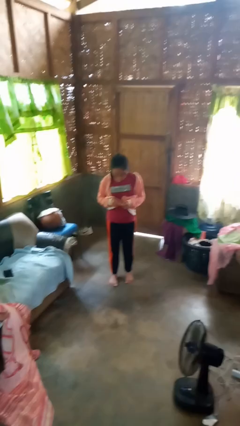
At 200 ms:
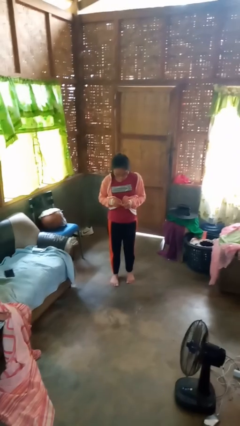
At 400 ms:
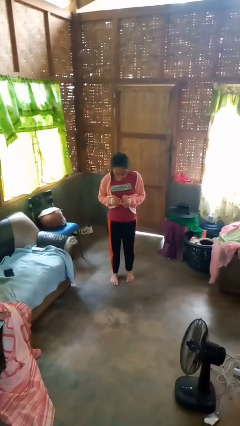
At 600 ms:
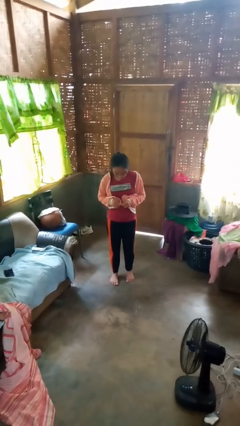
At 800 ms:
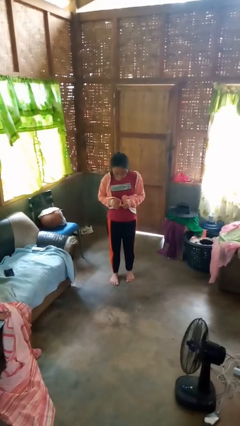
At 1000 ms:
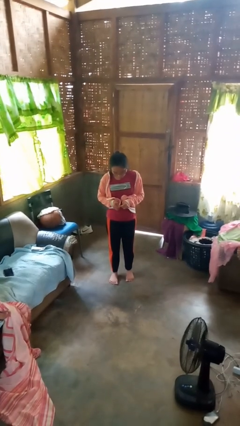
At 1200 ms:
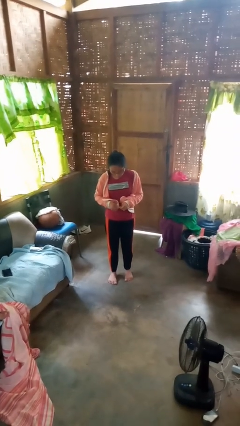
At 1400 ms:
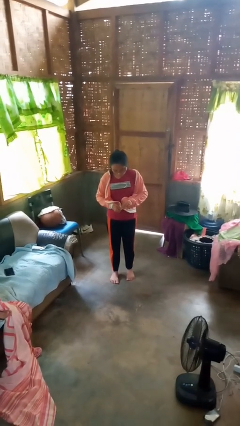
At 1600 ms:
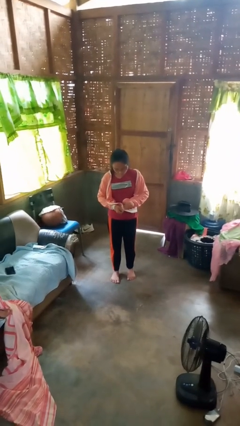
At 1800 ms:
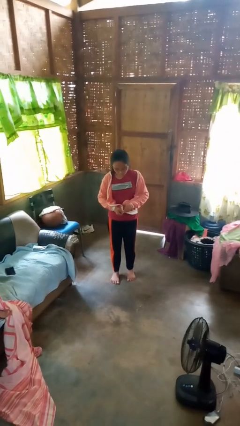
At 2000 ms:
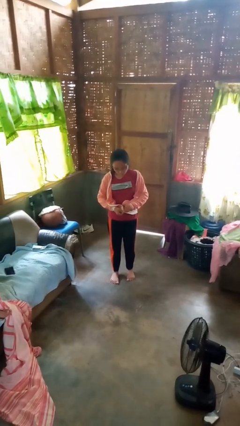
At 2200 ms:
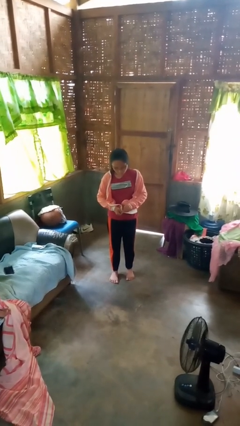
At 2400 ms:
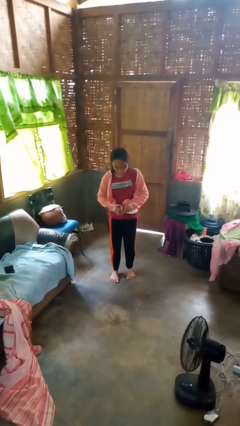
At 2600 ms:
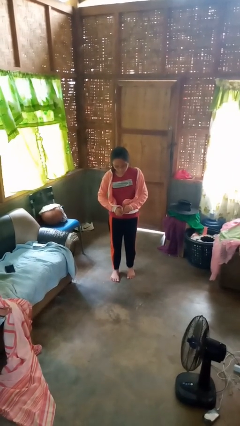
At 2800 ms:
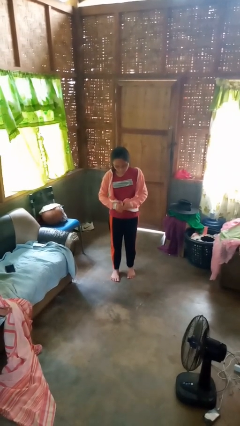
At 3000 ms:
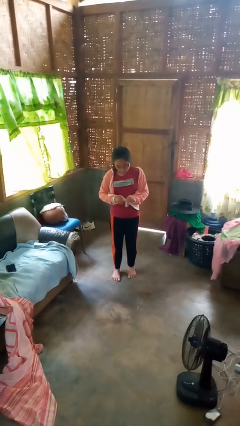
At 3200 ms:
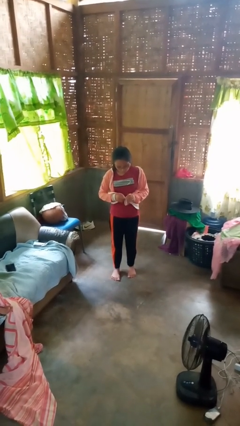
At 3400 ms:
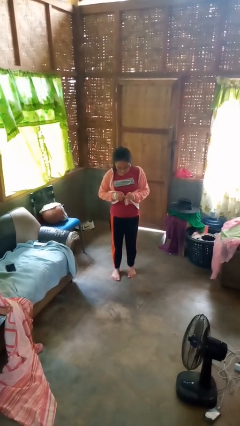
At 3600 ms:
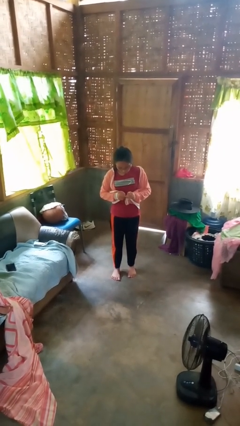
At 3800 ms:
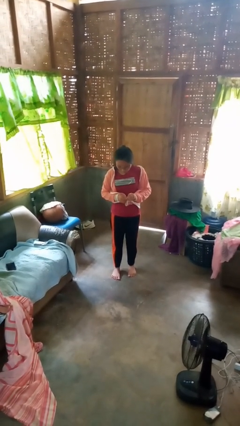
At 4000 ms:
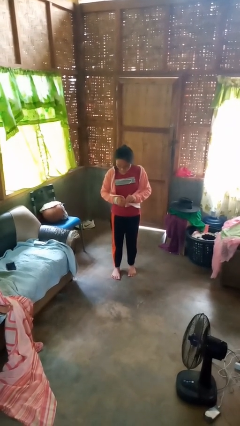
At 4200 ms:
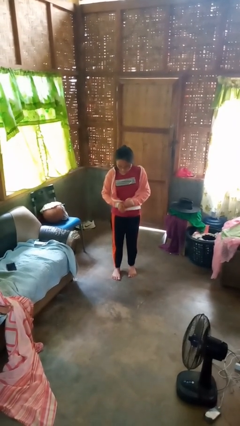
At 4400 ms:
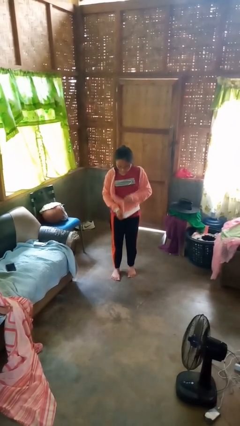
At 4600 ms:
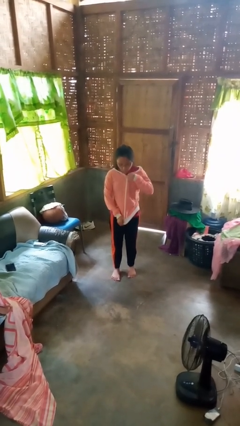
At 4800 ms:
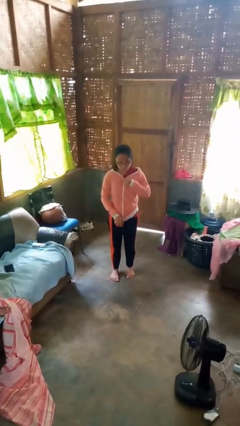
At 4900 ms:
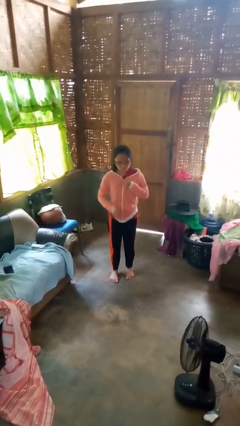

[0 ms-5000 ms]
person zips up jacket

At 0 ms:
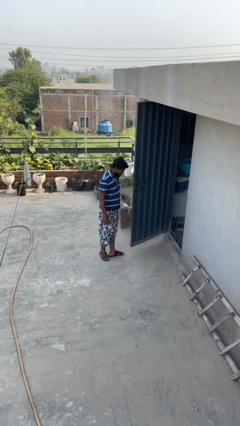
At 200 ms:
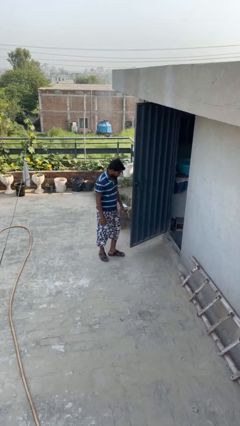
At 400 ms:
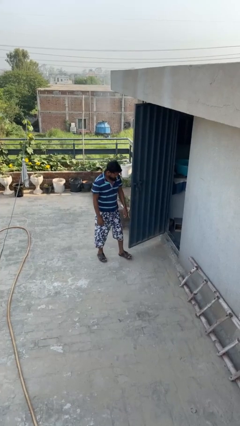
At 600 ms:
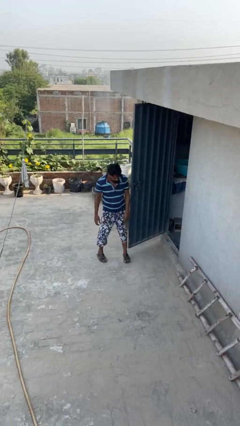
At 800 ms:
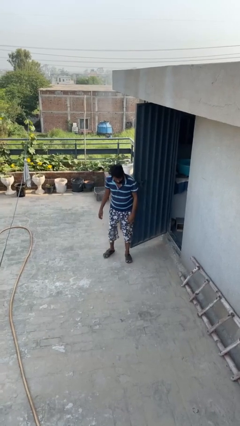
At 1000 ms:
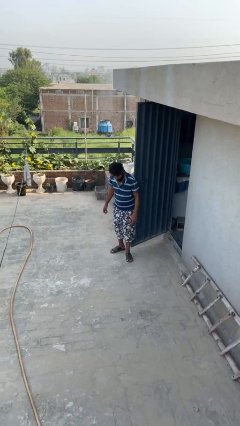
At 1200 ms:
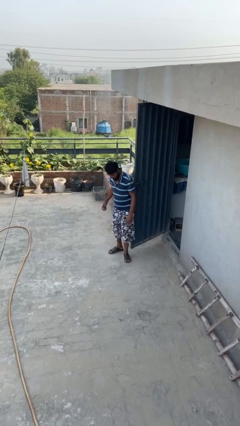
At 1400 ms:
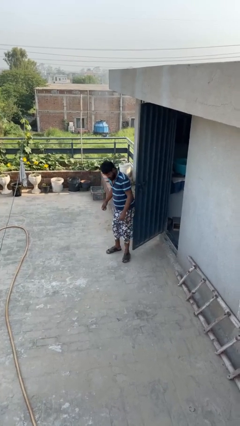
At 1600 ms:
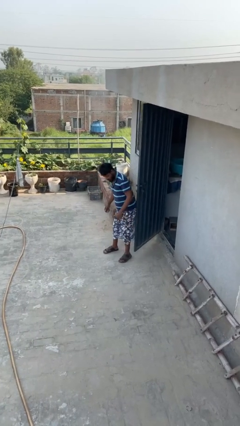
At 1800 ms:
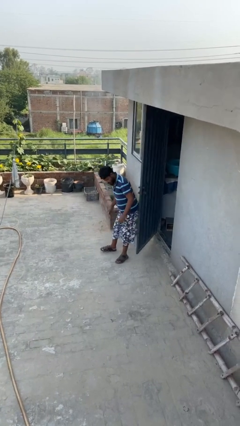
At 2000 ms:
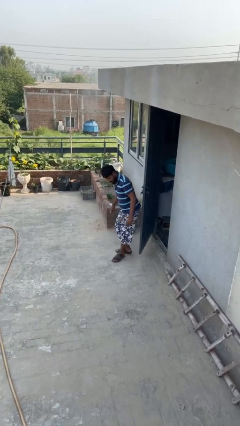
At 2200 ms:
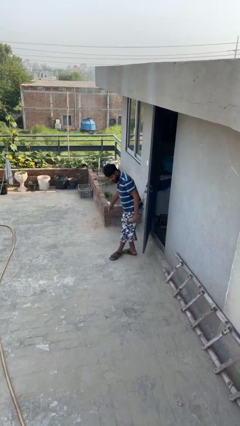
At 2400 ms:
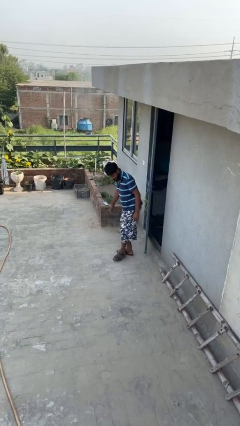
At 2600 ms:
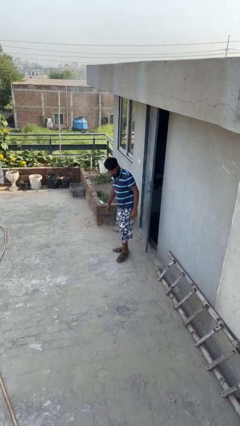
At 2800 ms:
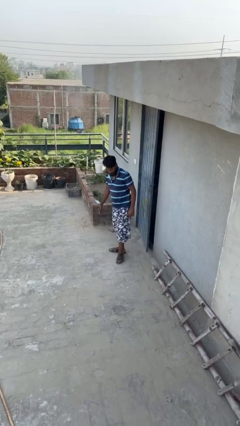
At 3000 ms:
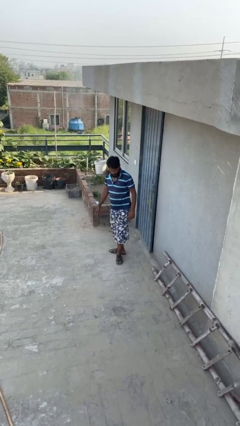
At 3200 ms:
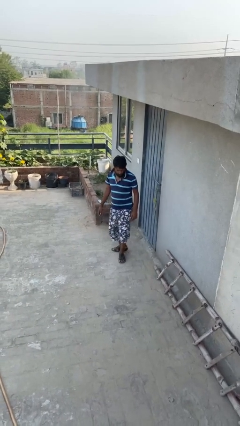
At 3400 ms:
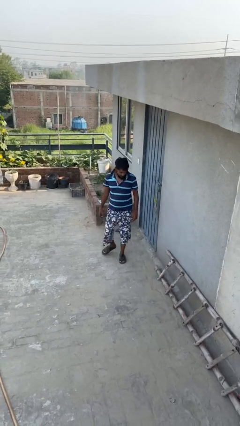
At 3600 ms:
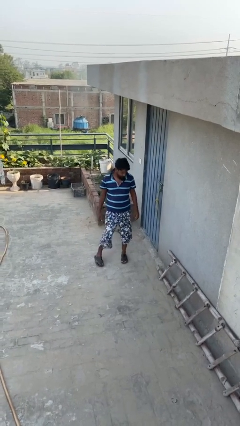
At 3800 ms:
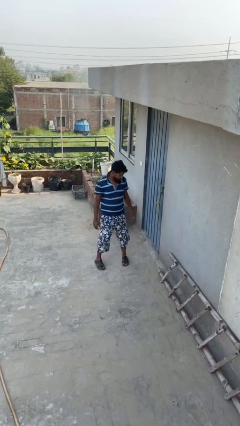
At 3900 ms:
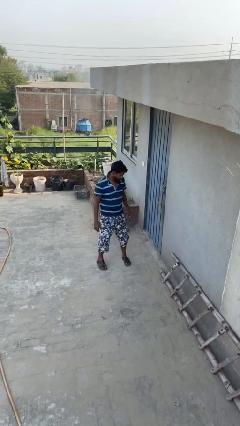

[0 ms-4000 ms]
person closes door with hip

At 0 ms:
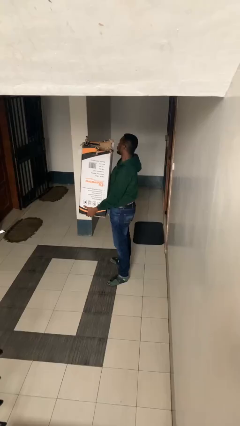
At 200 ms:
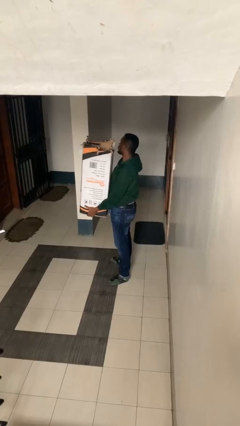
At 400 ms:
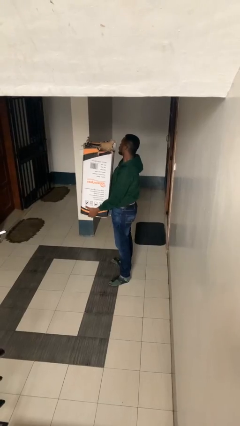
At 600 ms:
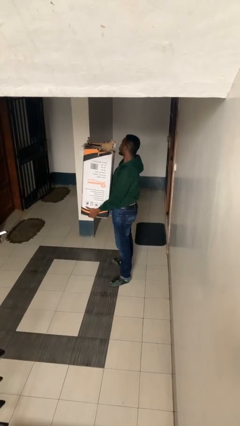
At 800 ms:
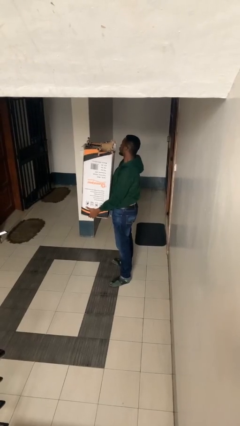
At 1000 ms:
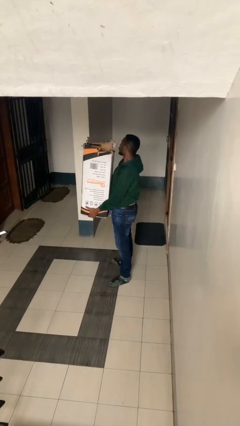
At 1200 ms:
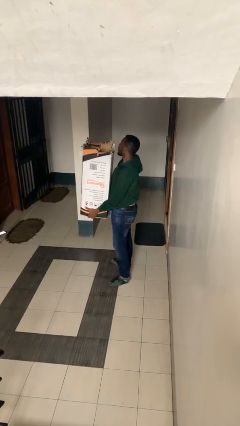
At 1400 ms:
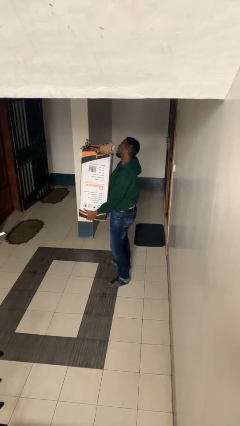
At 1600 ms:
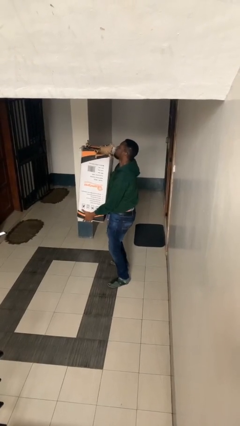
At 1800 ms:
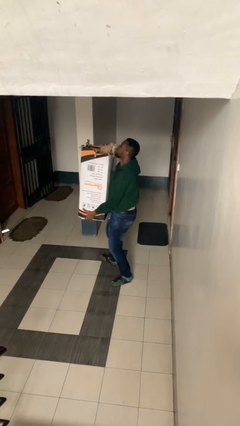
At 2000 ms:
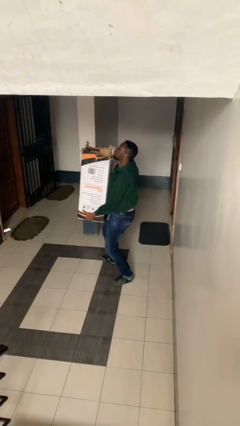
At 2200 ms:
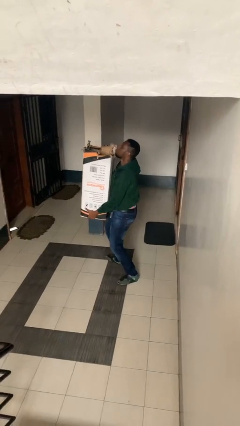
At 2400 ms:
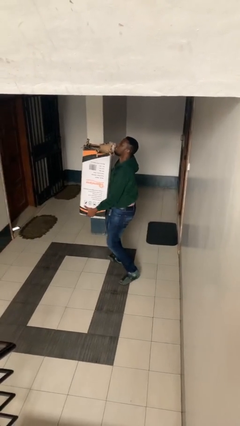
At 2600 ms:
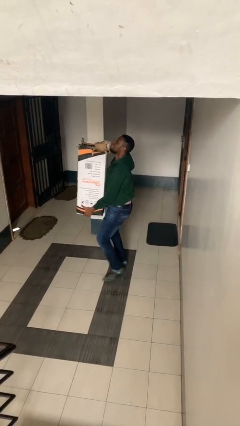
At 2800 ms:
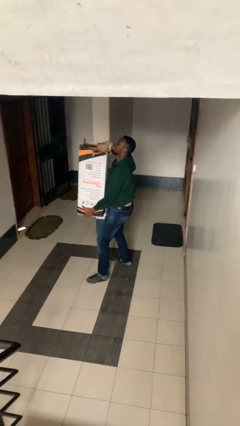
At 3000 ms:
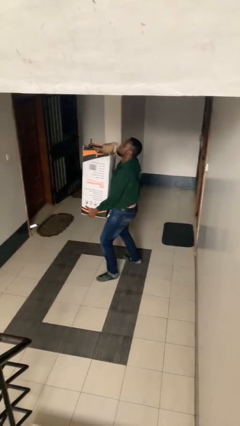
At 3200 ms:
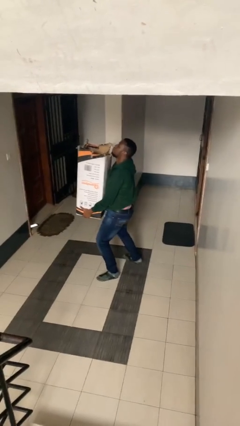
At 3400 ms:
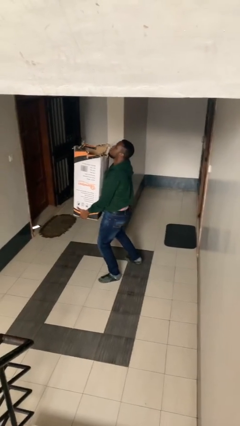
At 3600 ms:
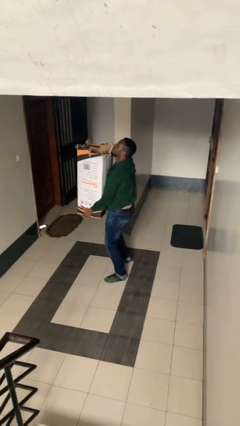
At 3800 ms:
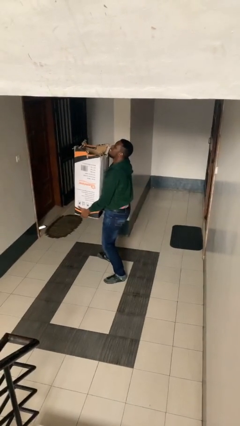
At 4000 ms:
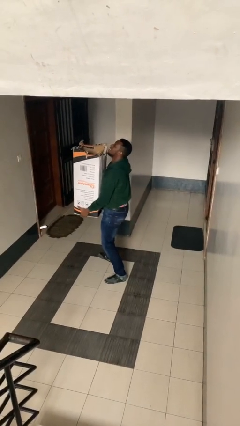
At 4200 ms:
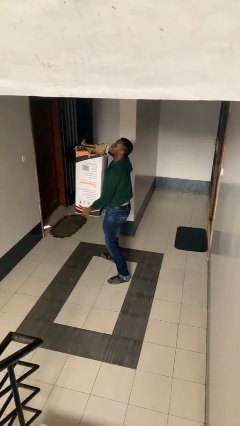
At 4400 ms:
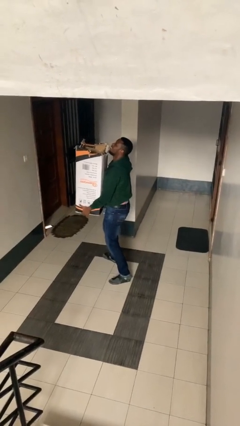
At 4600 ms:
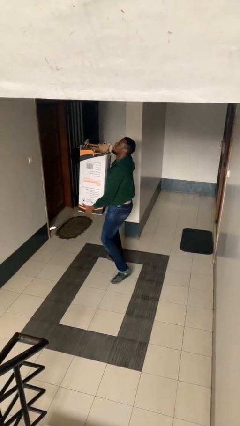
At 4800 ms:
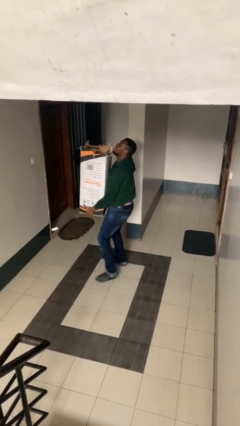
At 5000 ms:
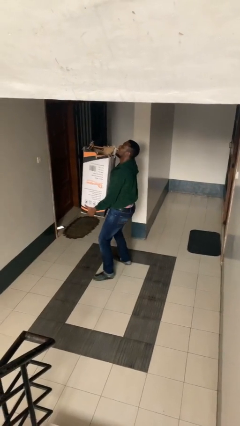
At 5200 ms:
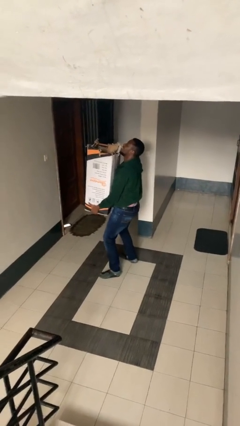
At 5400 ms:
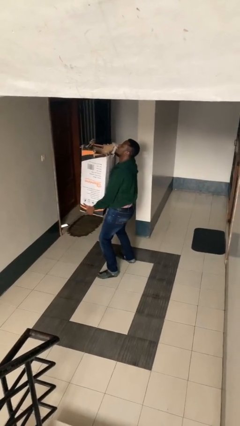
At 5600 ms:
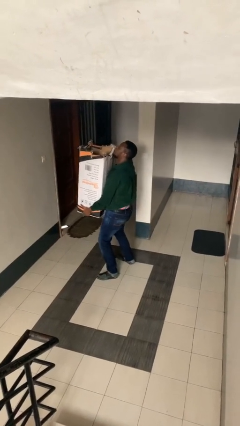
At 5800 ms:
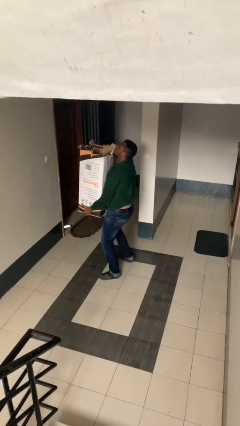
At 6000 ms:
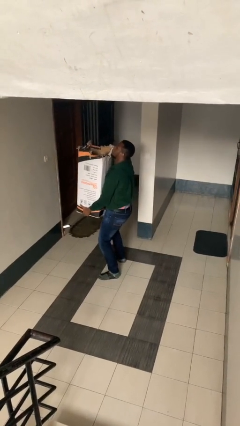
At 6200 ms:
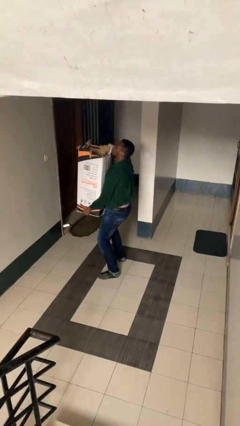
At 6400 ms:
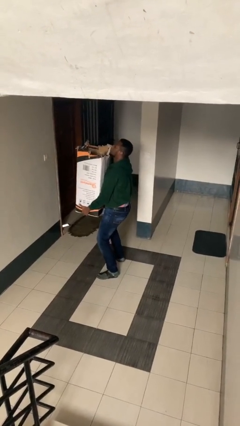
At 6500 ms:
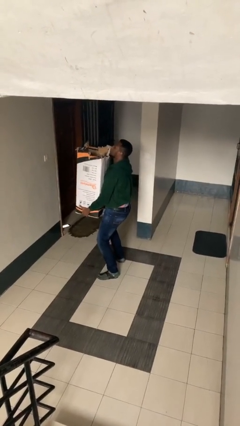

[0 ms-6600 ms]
person carries heavy object

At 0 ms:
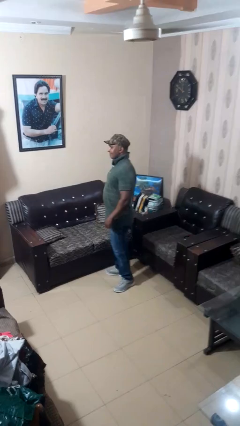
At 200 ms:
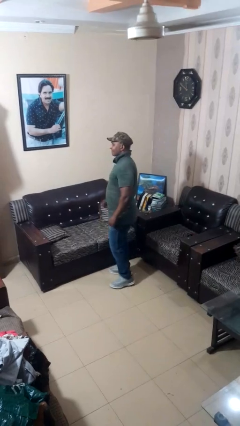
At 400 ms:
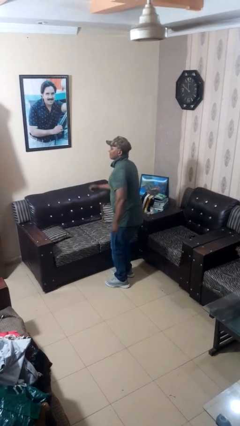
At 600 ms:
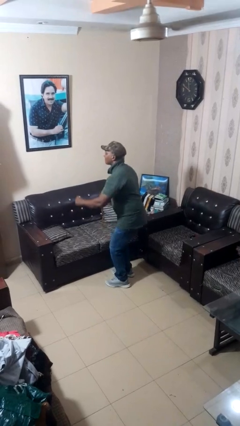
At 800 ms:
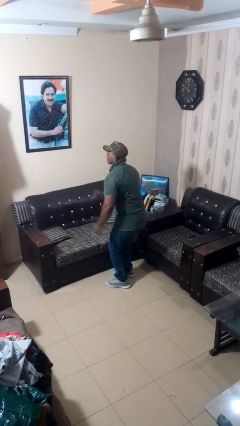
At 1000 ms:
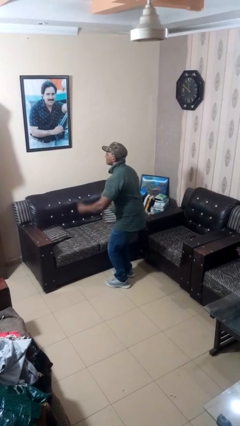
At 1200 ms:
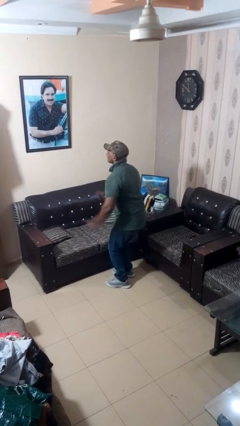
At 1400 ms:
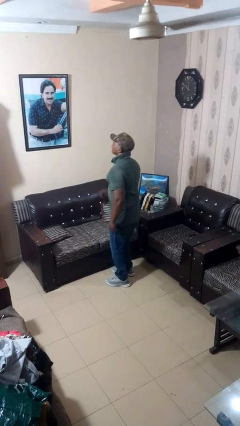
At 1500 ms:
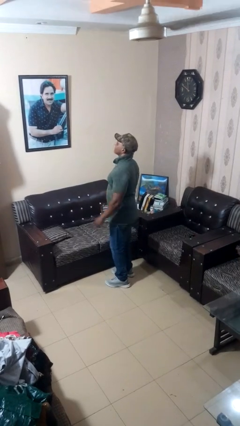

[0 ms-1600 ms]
person wiggles hips

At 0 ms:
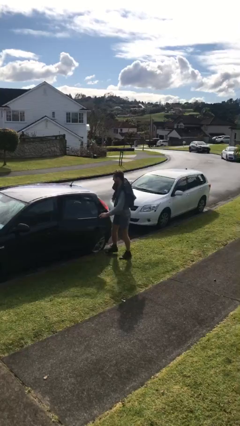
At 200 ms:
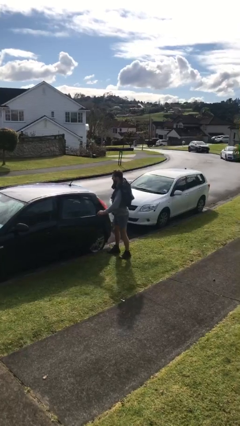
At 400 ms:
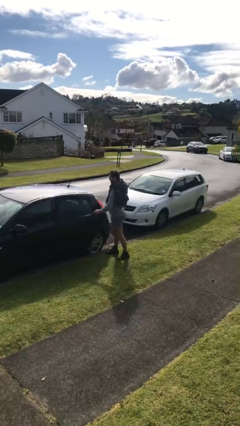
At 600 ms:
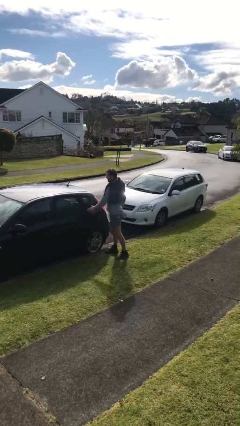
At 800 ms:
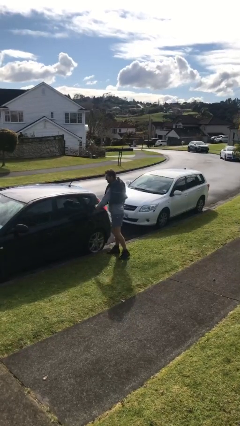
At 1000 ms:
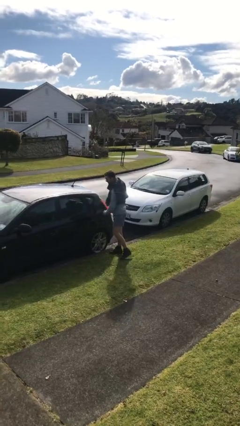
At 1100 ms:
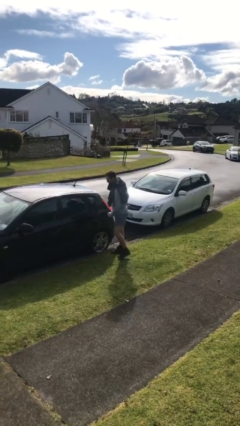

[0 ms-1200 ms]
person closes car door
